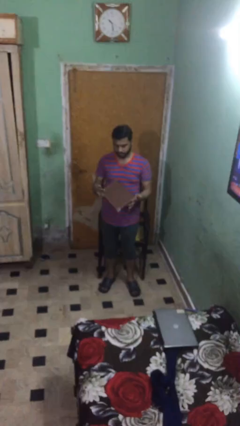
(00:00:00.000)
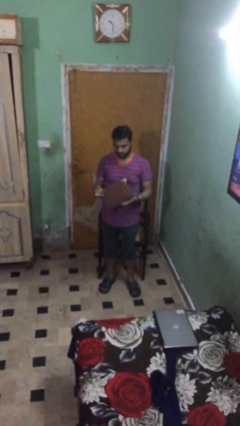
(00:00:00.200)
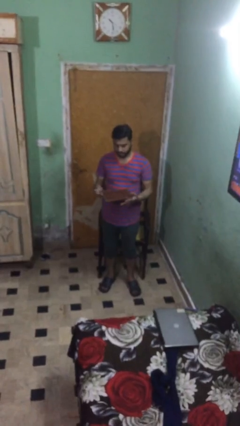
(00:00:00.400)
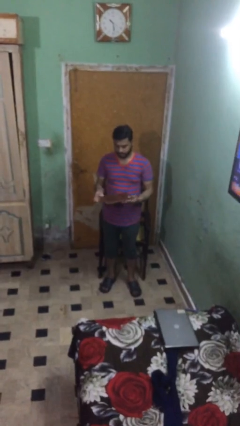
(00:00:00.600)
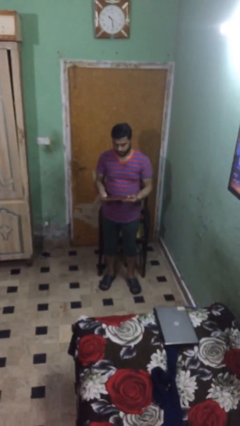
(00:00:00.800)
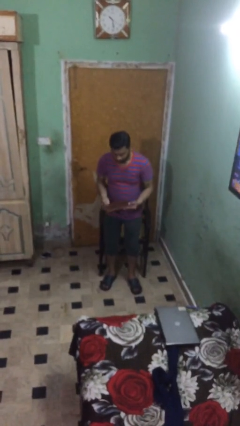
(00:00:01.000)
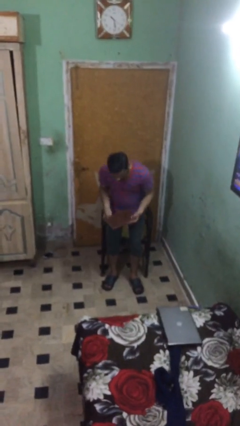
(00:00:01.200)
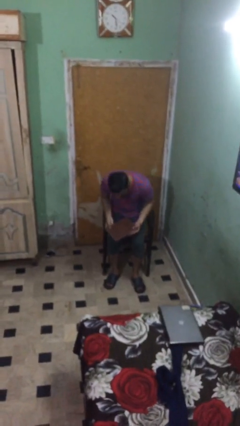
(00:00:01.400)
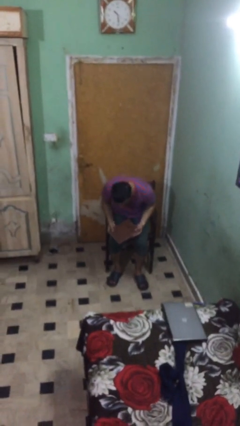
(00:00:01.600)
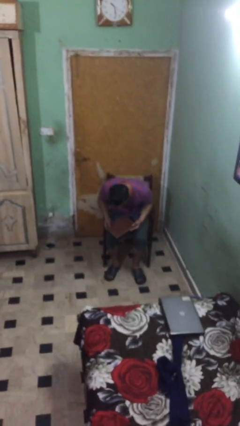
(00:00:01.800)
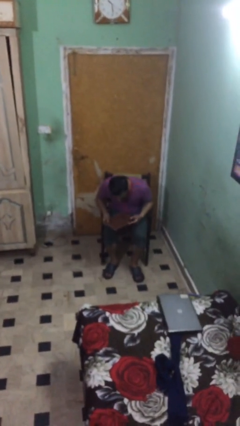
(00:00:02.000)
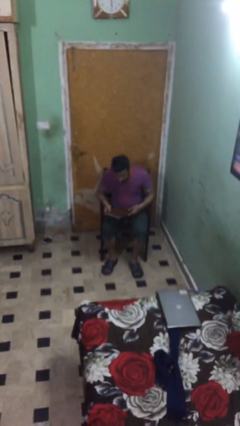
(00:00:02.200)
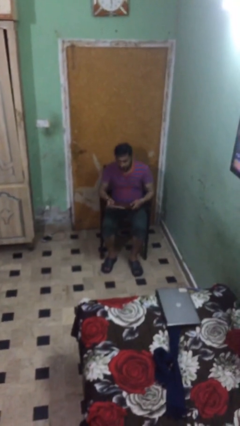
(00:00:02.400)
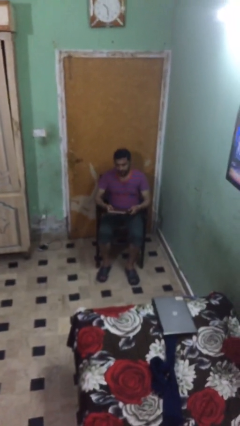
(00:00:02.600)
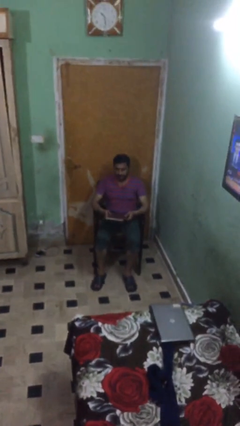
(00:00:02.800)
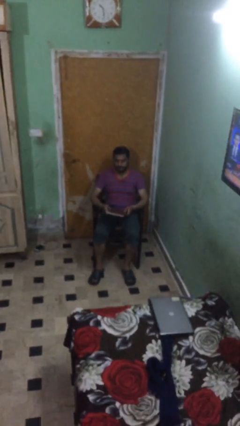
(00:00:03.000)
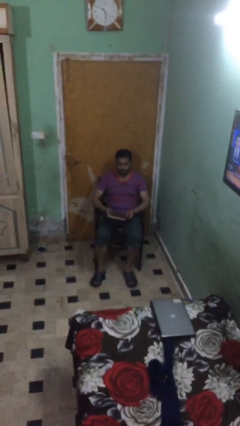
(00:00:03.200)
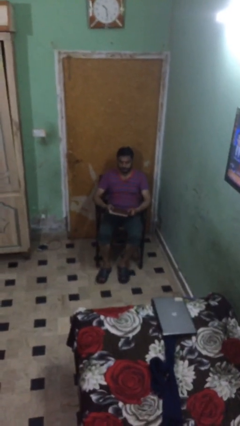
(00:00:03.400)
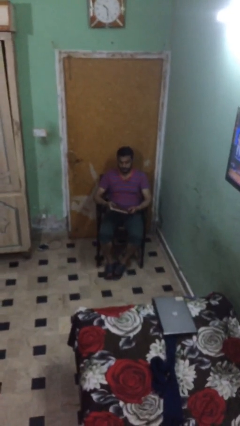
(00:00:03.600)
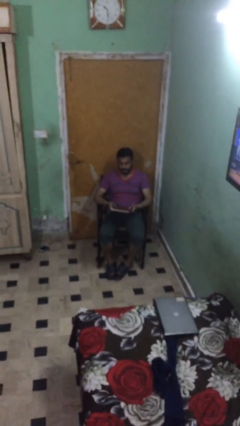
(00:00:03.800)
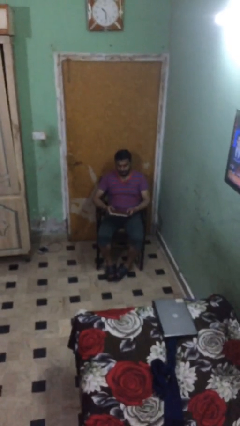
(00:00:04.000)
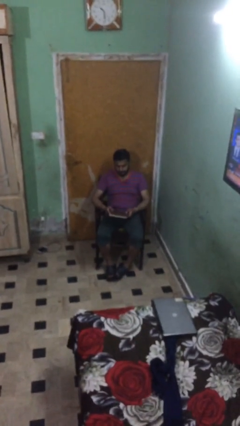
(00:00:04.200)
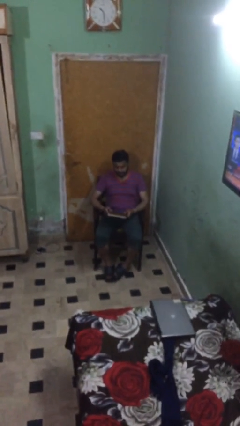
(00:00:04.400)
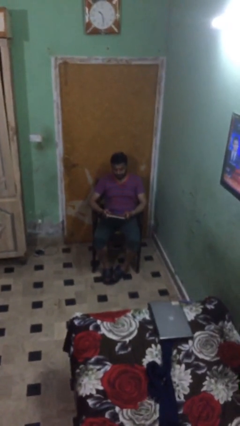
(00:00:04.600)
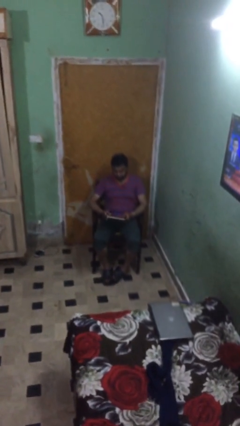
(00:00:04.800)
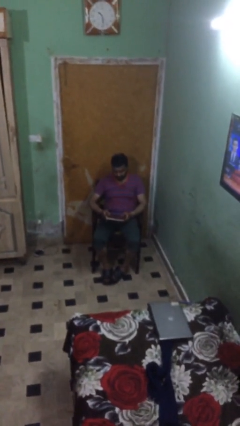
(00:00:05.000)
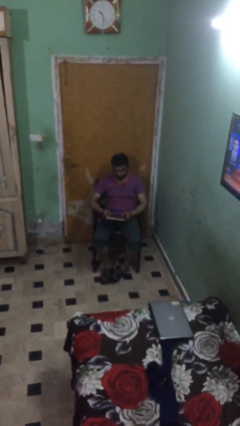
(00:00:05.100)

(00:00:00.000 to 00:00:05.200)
person sits down

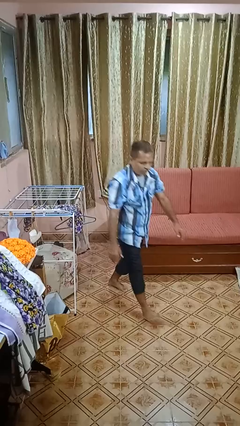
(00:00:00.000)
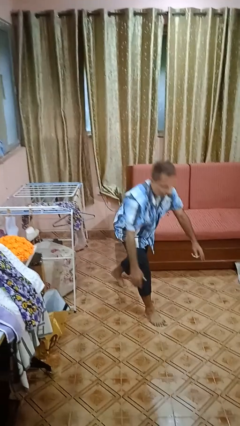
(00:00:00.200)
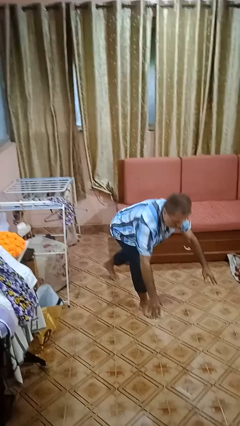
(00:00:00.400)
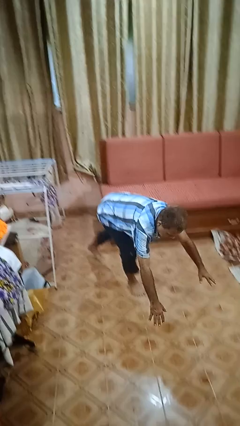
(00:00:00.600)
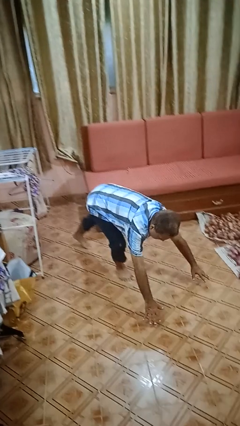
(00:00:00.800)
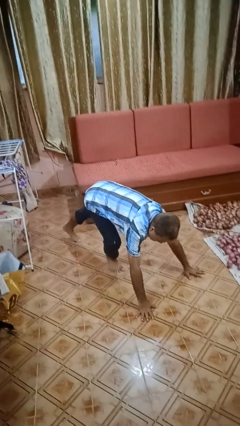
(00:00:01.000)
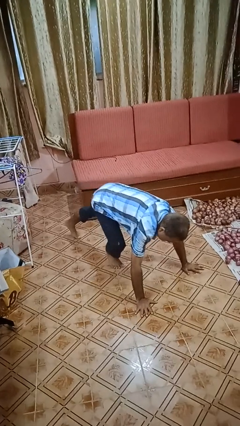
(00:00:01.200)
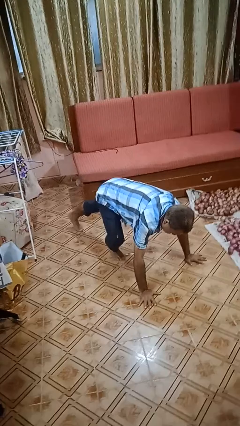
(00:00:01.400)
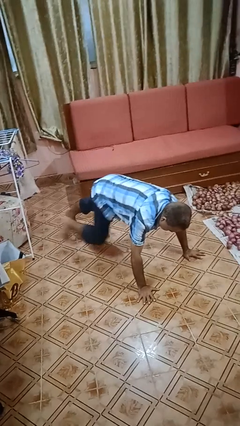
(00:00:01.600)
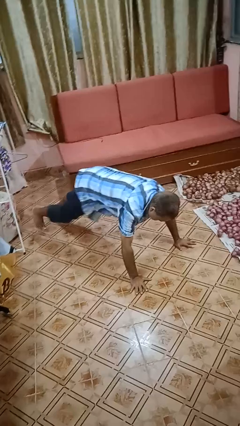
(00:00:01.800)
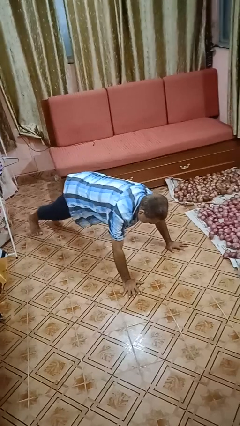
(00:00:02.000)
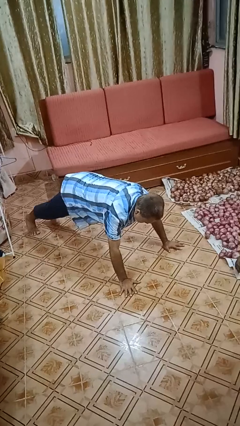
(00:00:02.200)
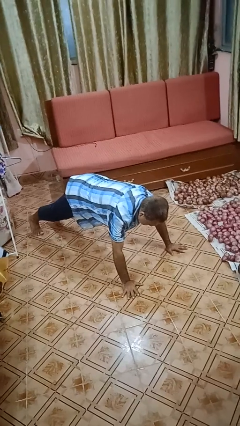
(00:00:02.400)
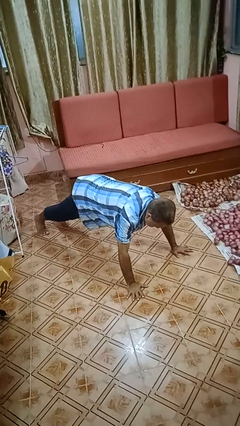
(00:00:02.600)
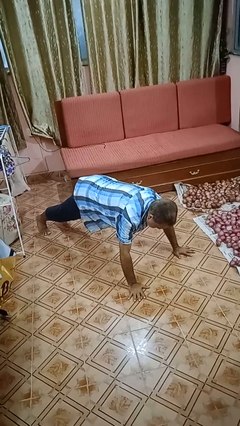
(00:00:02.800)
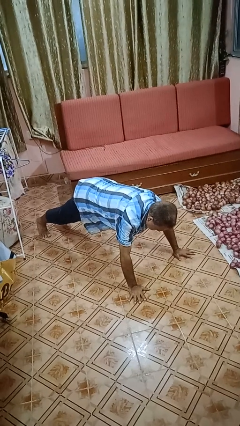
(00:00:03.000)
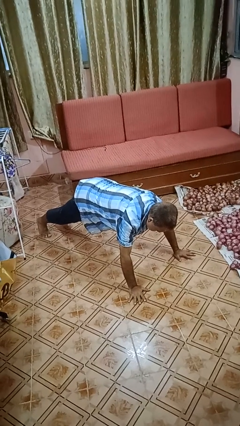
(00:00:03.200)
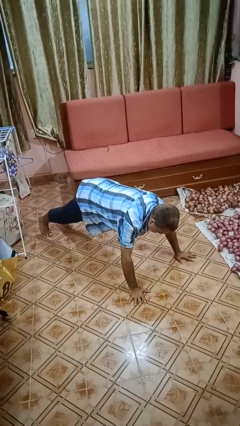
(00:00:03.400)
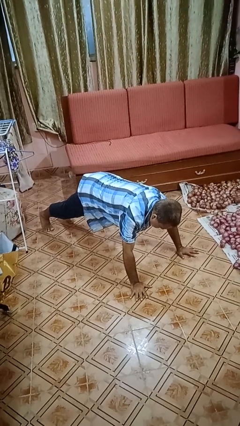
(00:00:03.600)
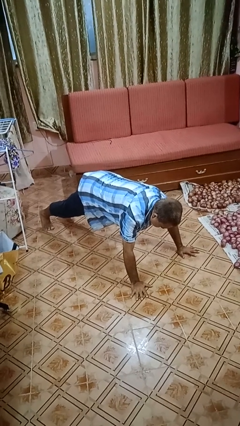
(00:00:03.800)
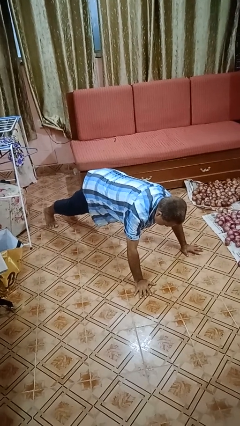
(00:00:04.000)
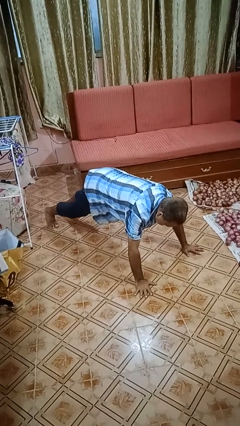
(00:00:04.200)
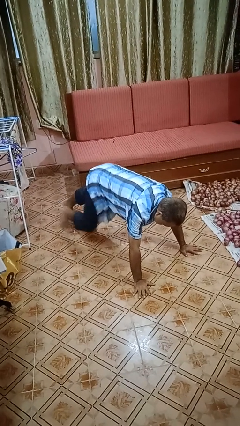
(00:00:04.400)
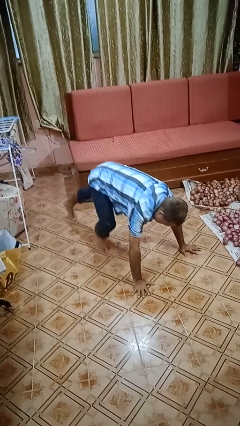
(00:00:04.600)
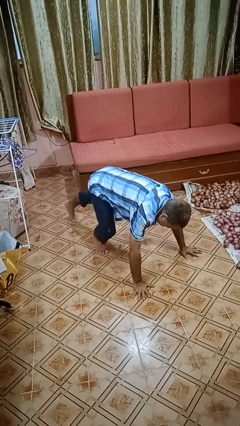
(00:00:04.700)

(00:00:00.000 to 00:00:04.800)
person exercises with plank

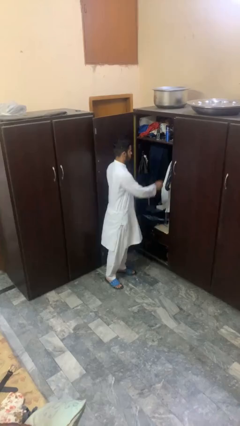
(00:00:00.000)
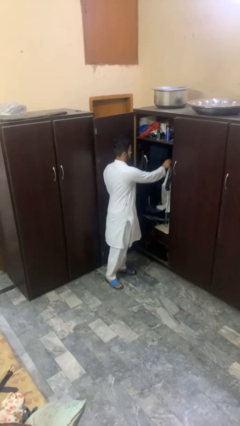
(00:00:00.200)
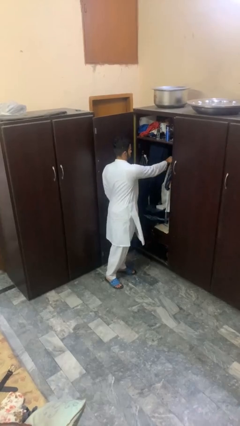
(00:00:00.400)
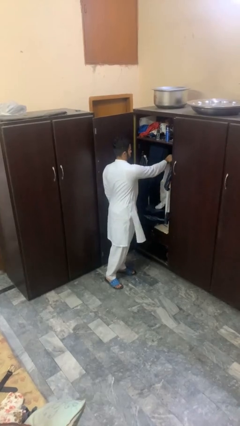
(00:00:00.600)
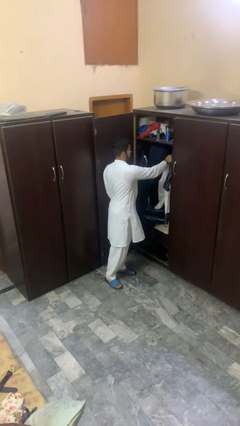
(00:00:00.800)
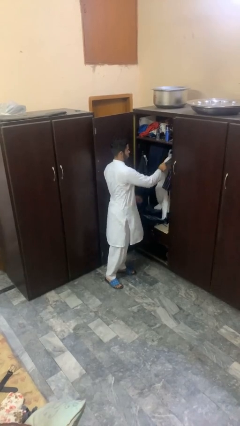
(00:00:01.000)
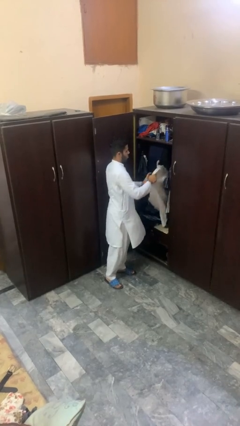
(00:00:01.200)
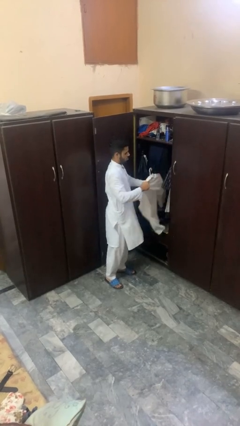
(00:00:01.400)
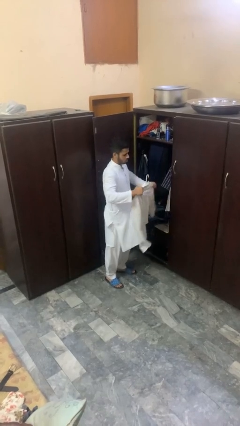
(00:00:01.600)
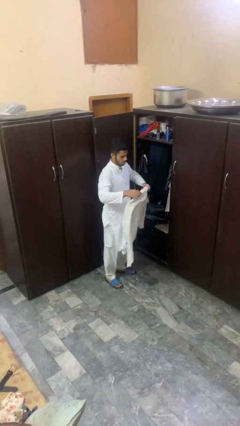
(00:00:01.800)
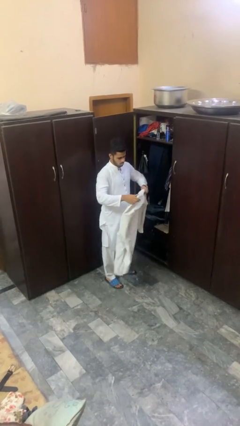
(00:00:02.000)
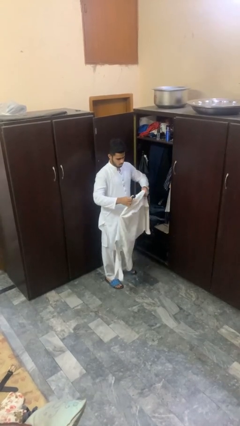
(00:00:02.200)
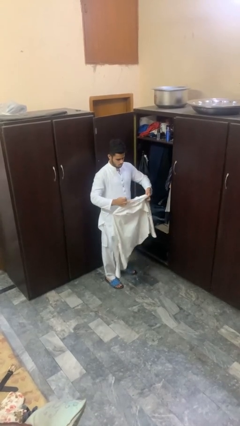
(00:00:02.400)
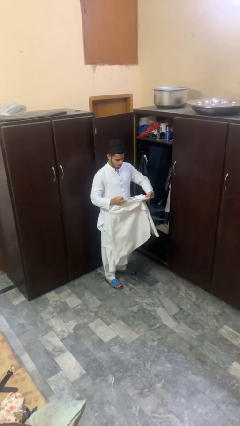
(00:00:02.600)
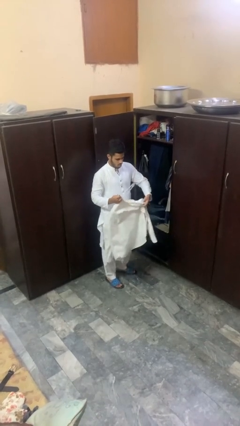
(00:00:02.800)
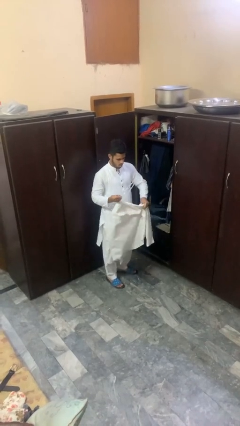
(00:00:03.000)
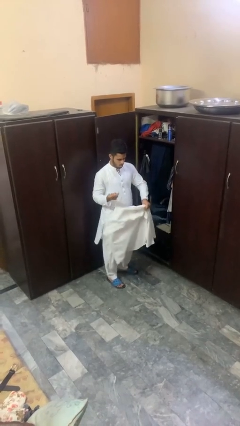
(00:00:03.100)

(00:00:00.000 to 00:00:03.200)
person takes clothes from closet

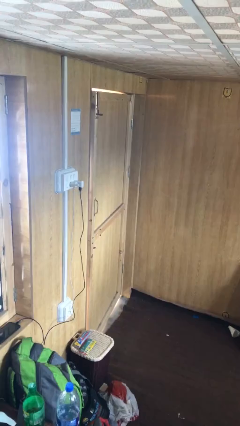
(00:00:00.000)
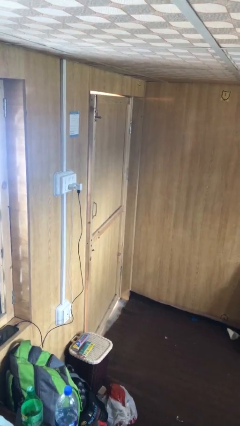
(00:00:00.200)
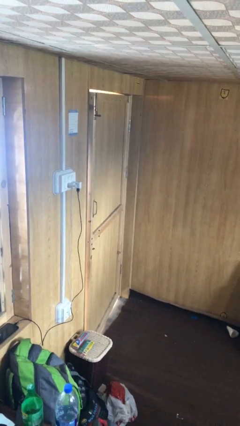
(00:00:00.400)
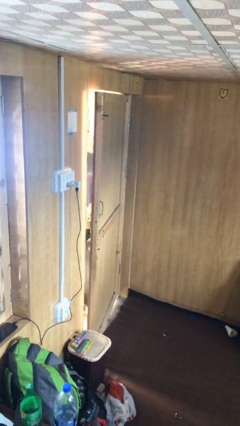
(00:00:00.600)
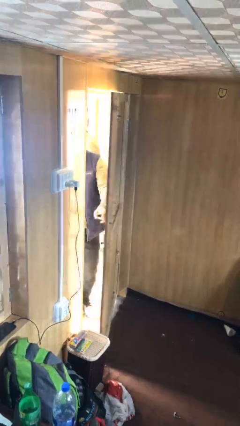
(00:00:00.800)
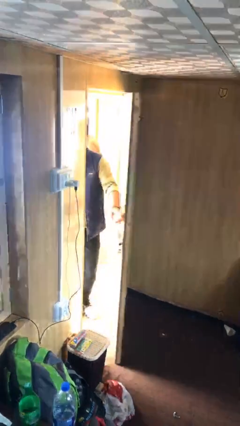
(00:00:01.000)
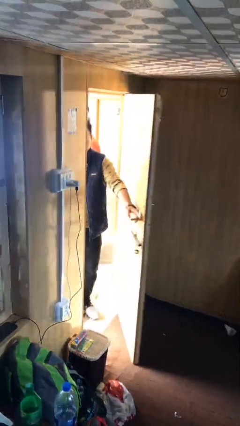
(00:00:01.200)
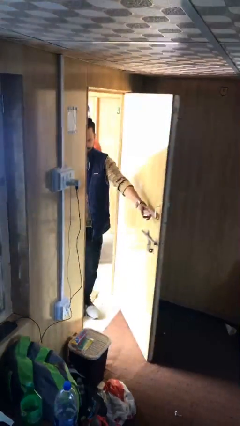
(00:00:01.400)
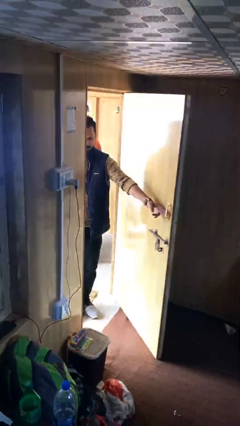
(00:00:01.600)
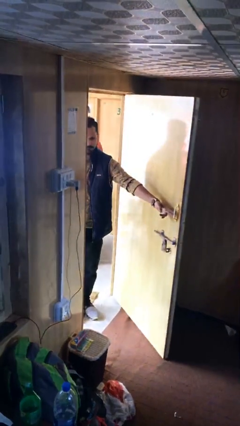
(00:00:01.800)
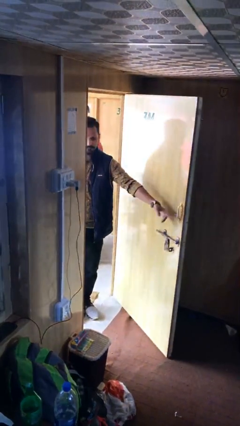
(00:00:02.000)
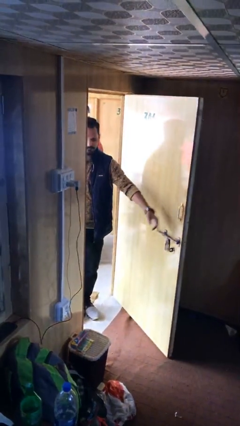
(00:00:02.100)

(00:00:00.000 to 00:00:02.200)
person opens facility door

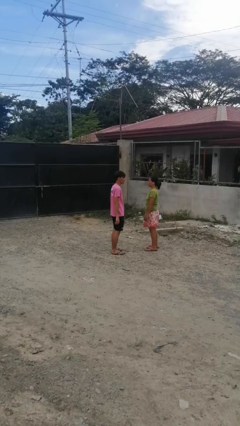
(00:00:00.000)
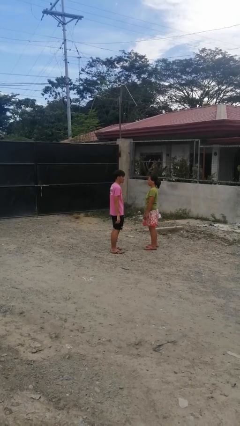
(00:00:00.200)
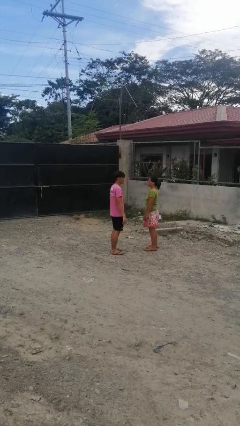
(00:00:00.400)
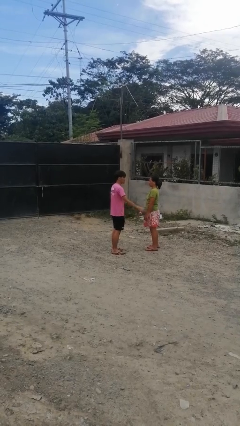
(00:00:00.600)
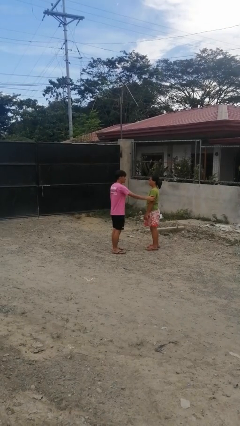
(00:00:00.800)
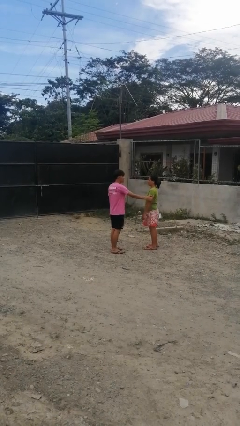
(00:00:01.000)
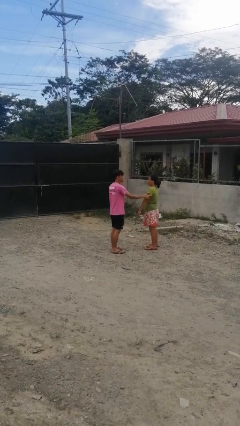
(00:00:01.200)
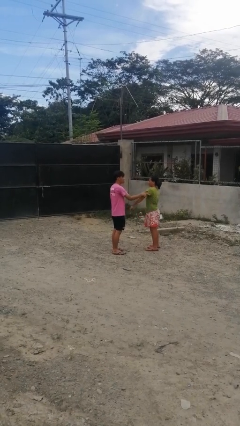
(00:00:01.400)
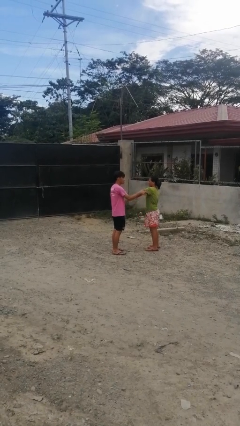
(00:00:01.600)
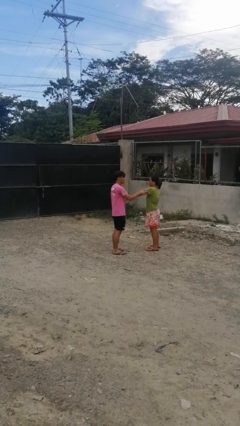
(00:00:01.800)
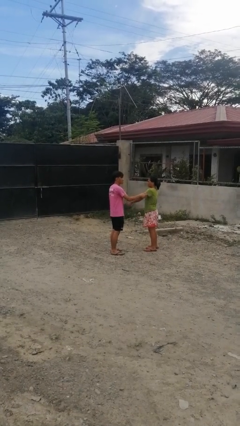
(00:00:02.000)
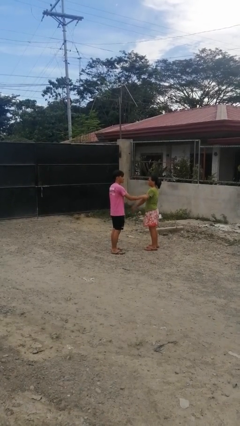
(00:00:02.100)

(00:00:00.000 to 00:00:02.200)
person grabs person by bicep
